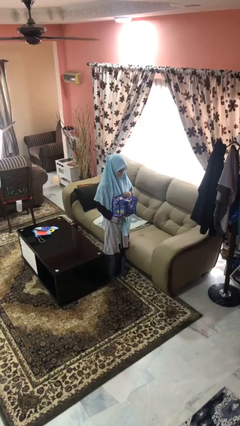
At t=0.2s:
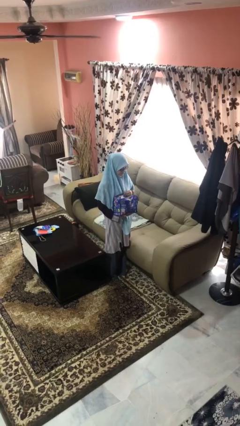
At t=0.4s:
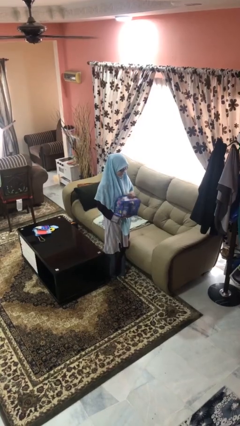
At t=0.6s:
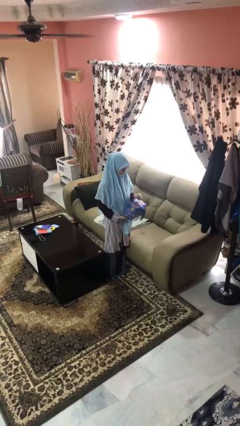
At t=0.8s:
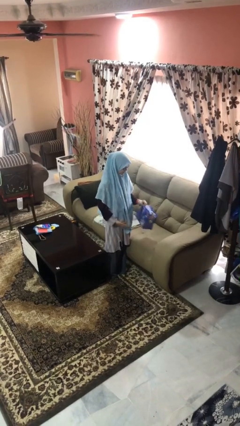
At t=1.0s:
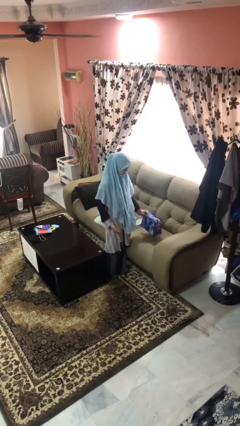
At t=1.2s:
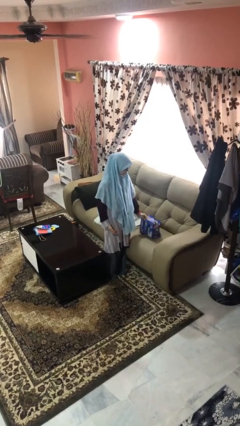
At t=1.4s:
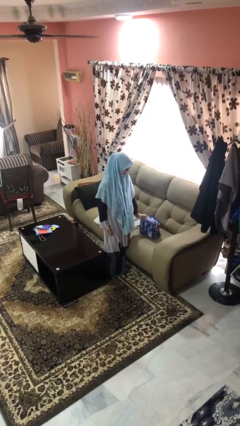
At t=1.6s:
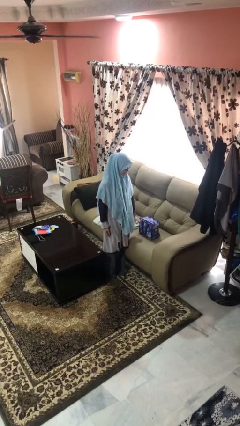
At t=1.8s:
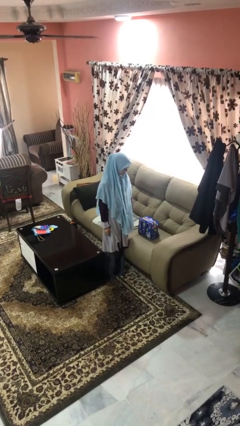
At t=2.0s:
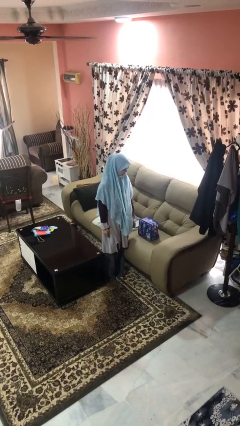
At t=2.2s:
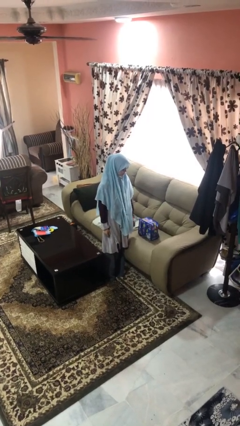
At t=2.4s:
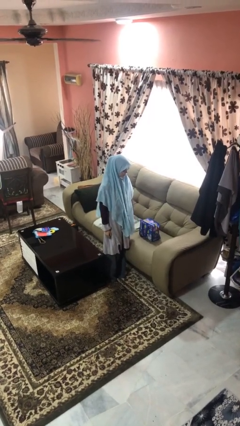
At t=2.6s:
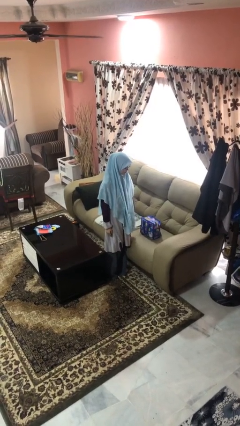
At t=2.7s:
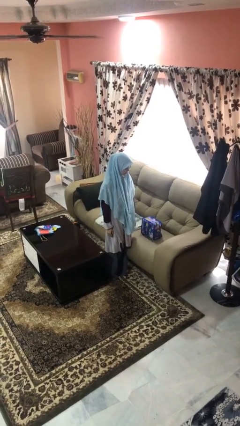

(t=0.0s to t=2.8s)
person puts down object on couch

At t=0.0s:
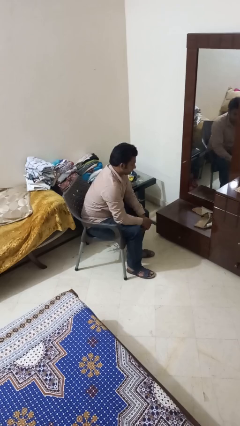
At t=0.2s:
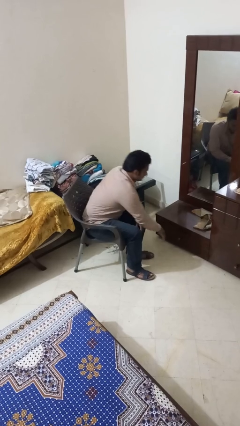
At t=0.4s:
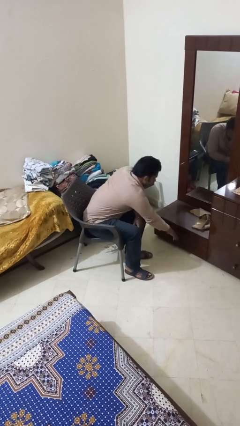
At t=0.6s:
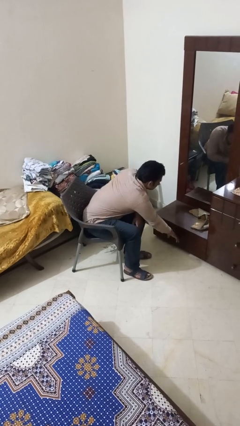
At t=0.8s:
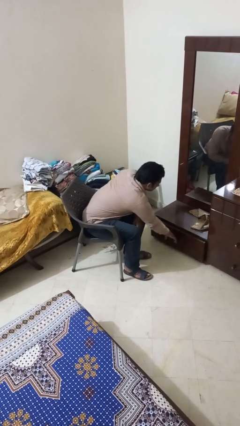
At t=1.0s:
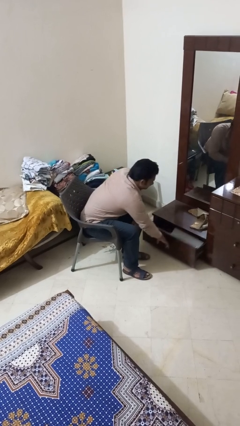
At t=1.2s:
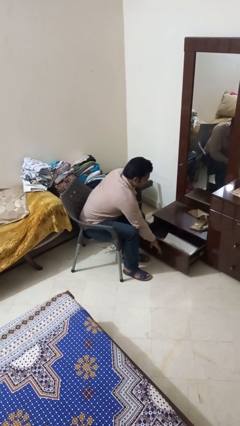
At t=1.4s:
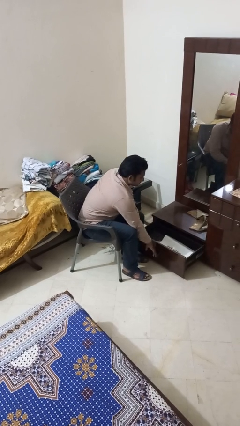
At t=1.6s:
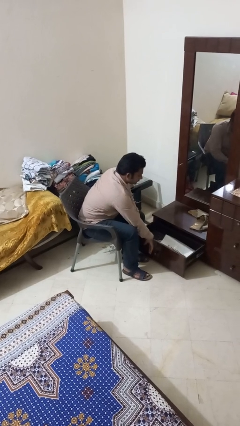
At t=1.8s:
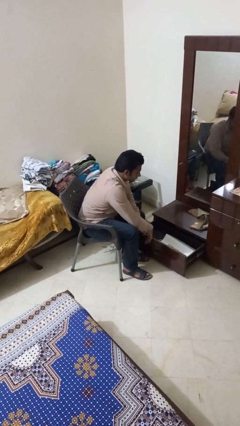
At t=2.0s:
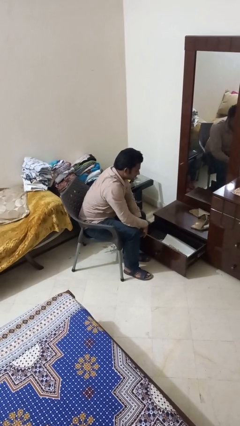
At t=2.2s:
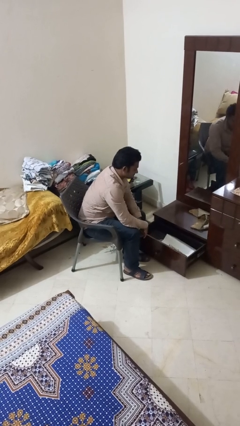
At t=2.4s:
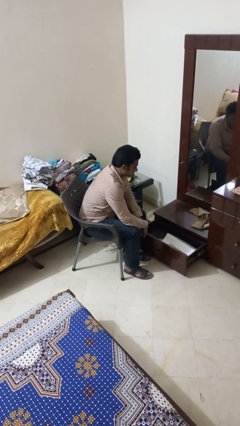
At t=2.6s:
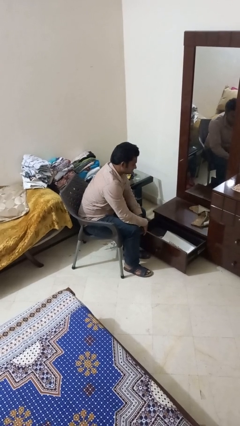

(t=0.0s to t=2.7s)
person opens closet door

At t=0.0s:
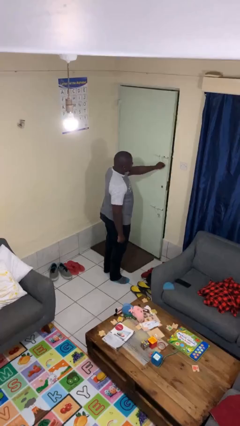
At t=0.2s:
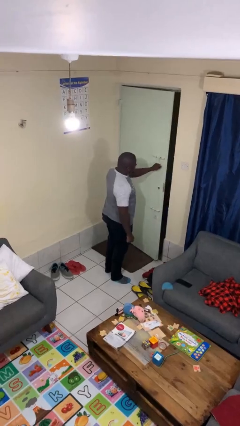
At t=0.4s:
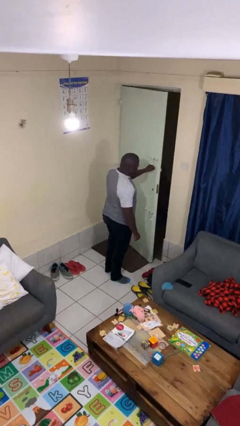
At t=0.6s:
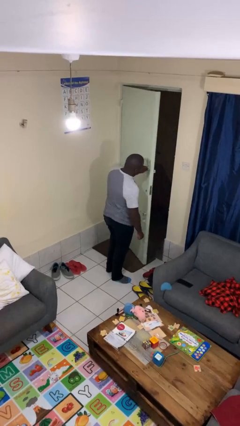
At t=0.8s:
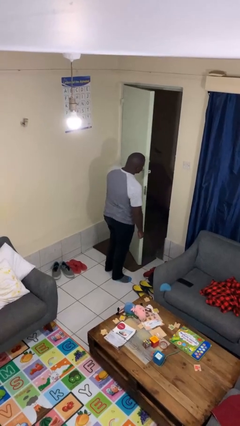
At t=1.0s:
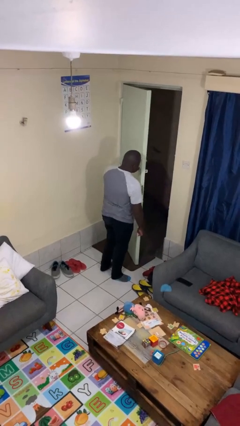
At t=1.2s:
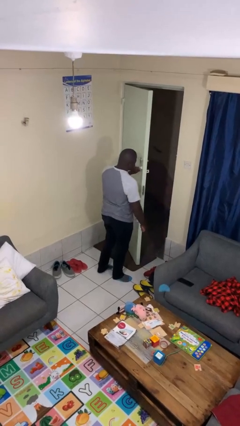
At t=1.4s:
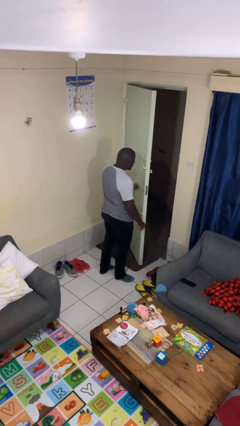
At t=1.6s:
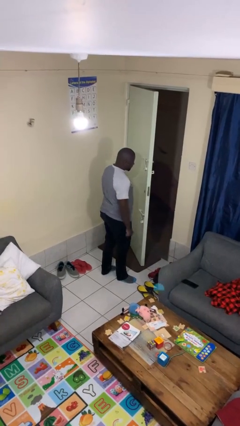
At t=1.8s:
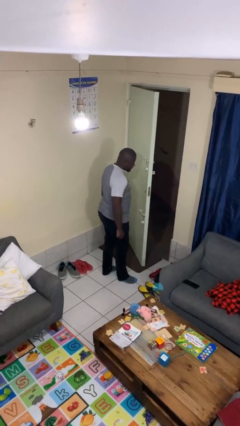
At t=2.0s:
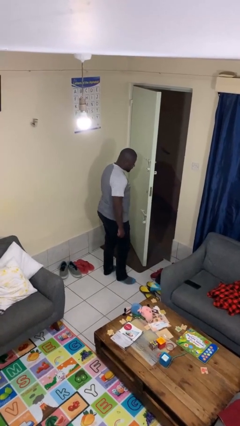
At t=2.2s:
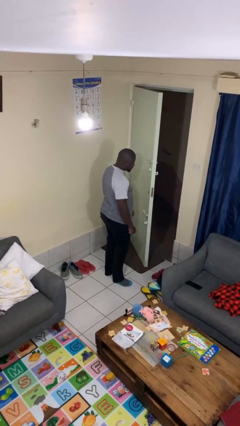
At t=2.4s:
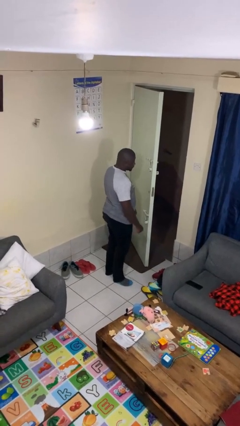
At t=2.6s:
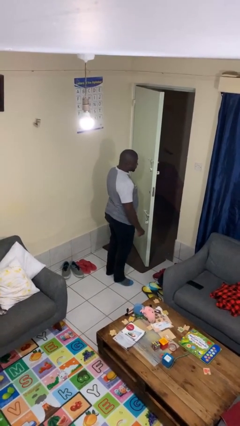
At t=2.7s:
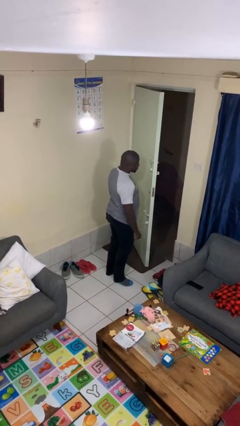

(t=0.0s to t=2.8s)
person opens facility door

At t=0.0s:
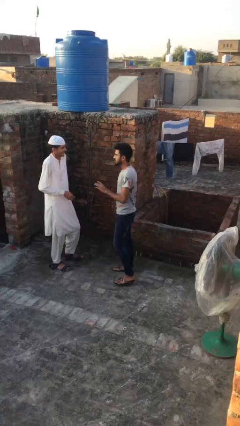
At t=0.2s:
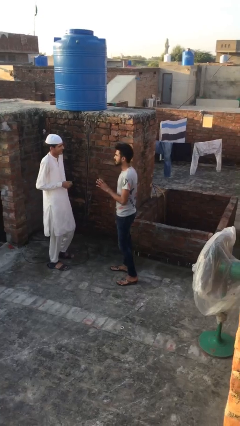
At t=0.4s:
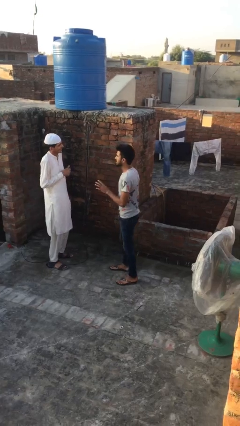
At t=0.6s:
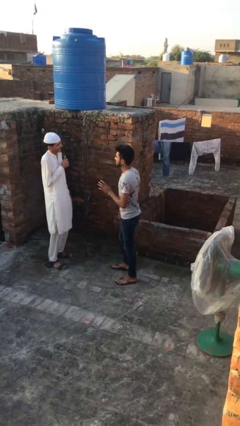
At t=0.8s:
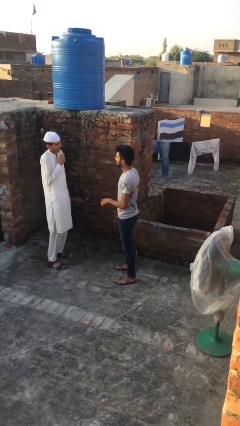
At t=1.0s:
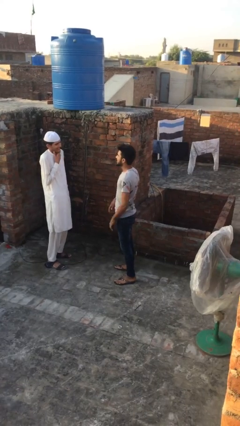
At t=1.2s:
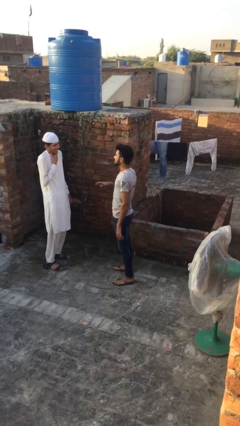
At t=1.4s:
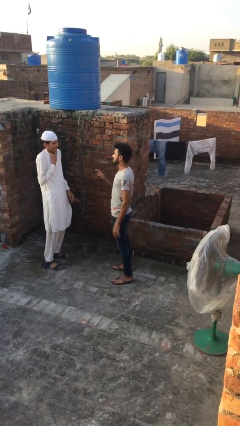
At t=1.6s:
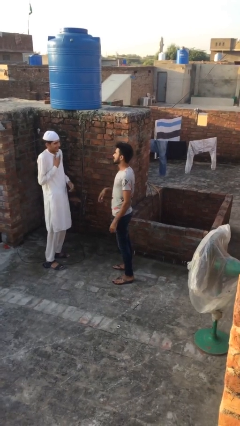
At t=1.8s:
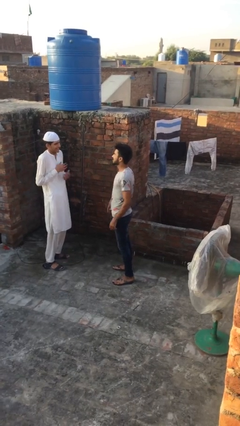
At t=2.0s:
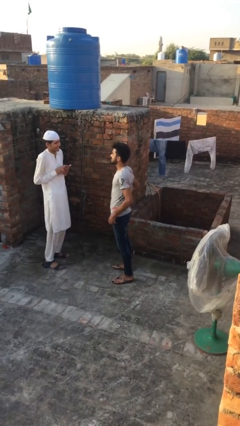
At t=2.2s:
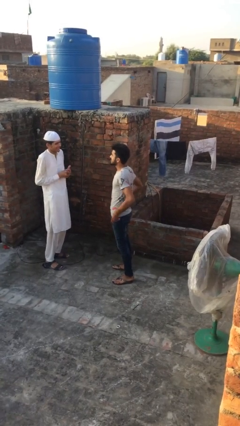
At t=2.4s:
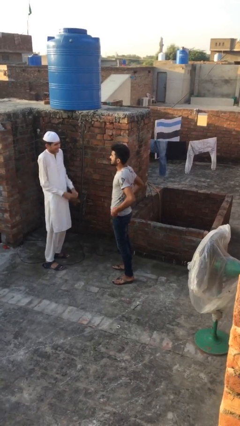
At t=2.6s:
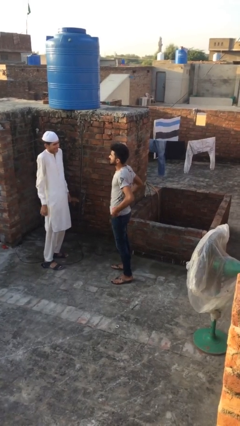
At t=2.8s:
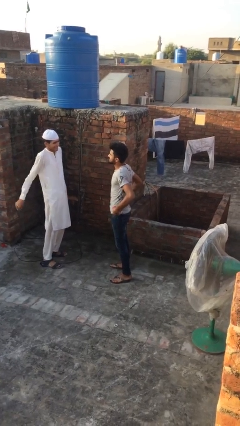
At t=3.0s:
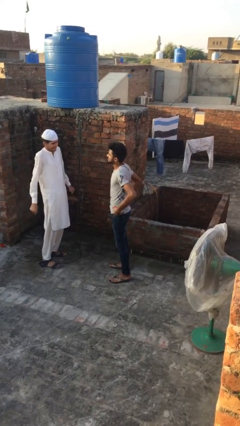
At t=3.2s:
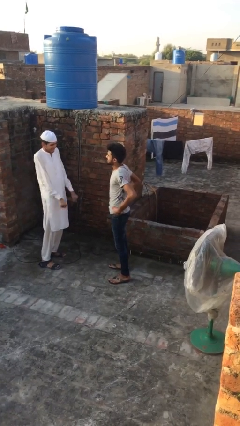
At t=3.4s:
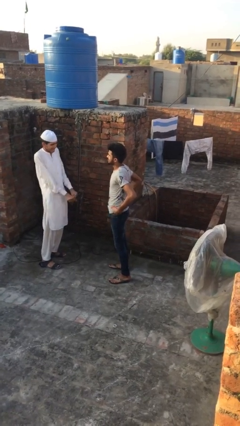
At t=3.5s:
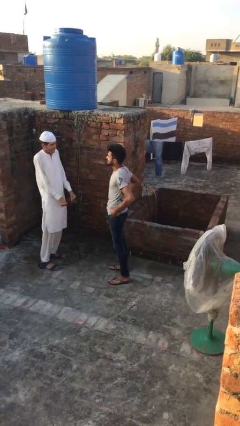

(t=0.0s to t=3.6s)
person talks to person

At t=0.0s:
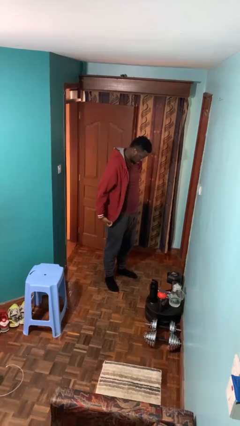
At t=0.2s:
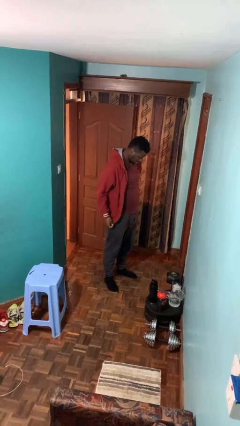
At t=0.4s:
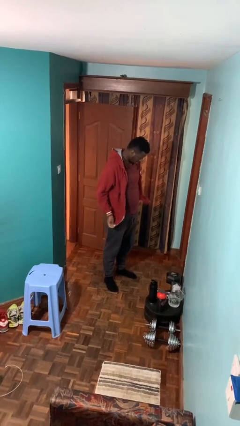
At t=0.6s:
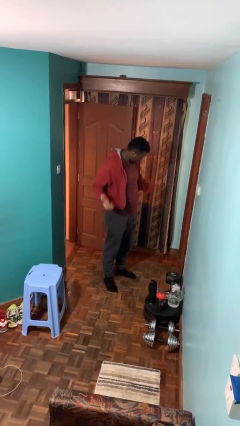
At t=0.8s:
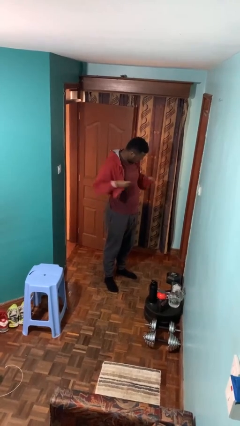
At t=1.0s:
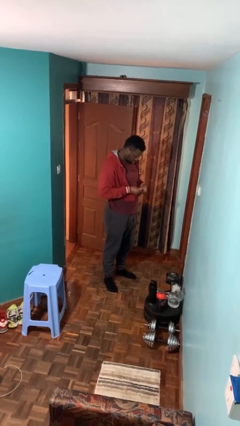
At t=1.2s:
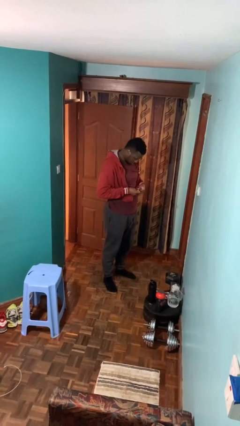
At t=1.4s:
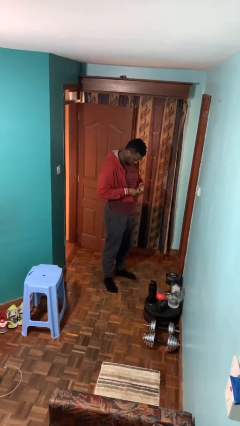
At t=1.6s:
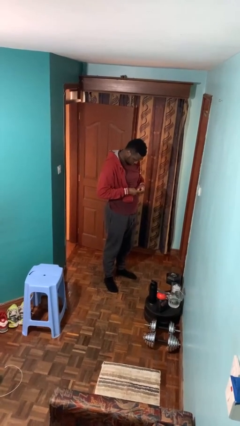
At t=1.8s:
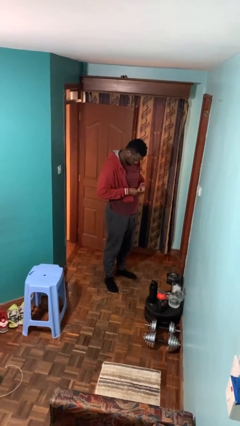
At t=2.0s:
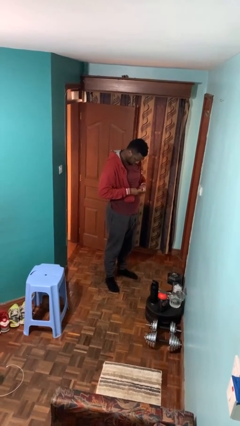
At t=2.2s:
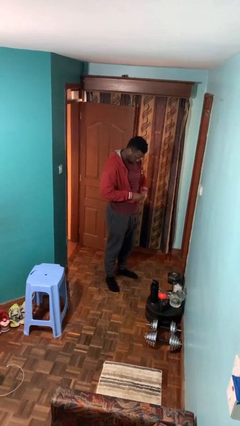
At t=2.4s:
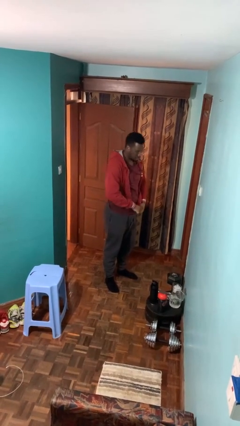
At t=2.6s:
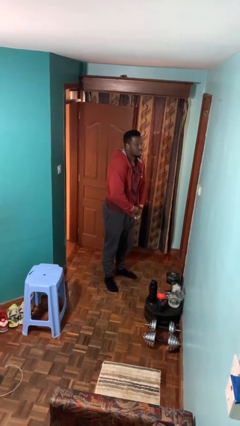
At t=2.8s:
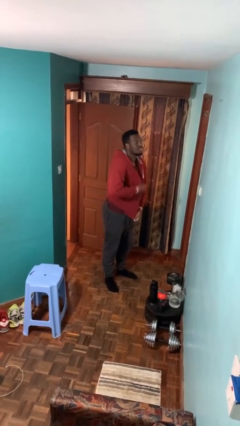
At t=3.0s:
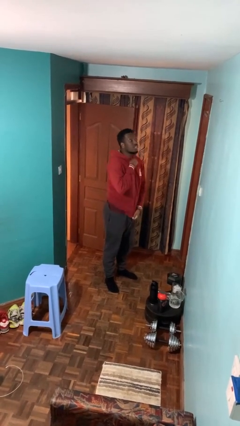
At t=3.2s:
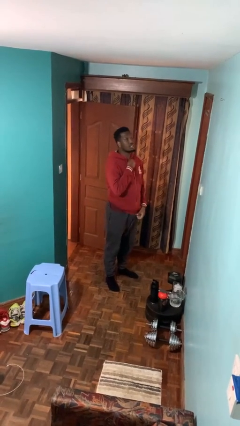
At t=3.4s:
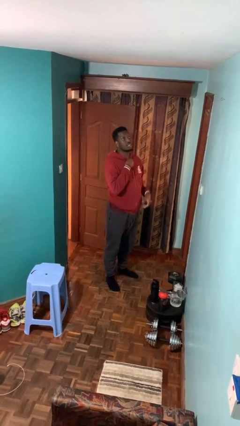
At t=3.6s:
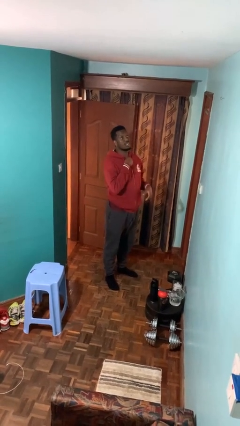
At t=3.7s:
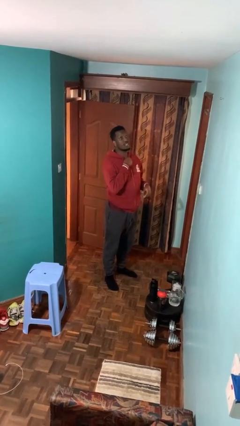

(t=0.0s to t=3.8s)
person zips up jacket

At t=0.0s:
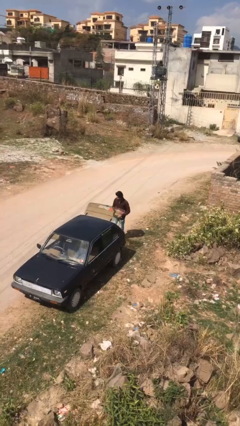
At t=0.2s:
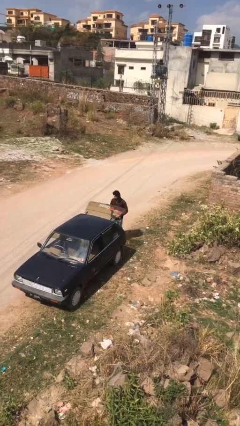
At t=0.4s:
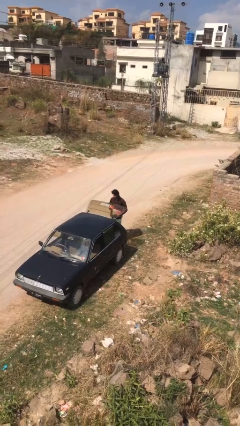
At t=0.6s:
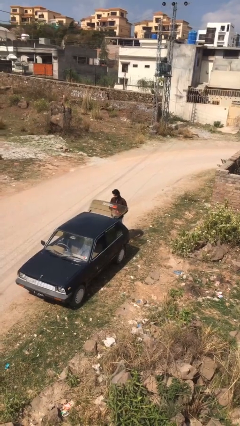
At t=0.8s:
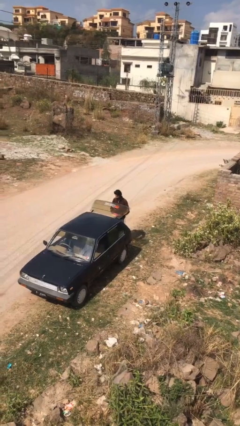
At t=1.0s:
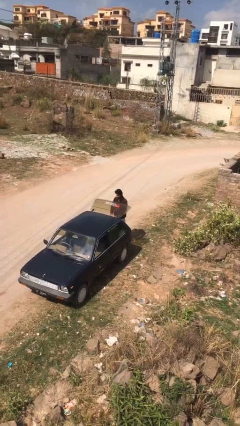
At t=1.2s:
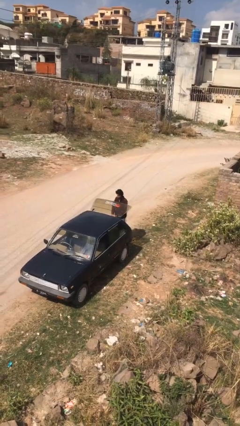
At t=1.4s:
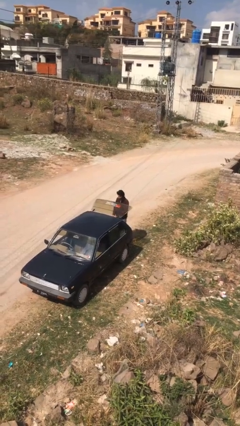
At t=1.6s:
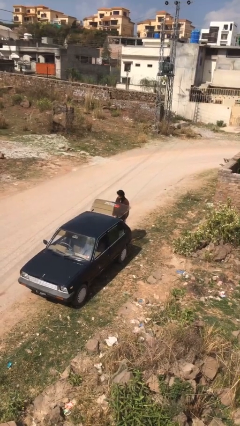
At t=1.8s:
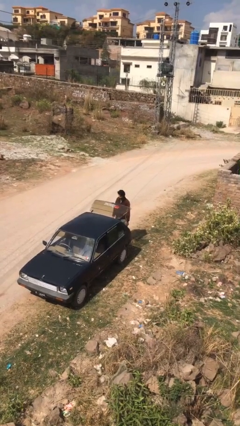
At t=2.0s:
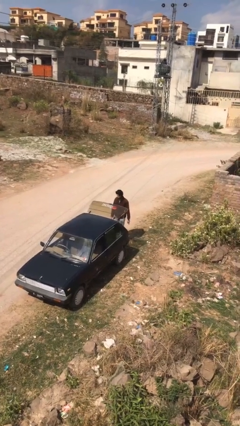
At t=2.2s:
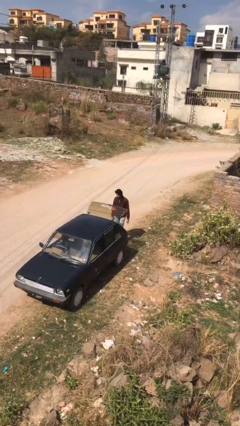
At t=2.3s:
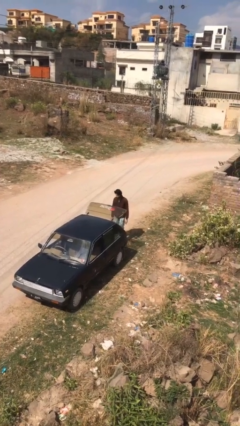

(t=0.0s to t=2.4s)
person loads car
